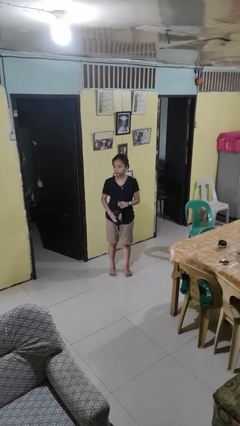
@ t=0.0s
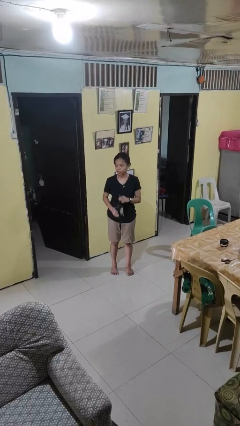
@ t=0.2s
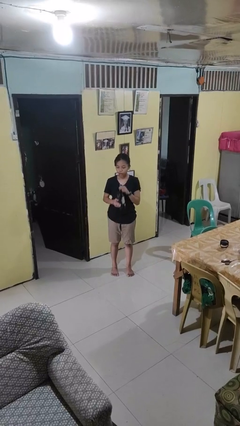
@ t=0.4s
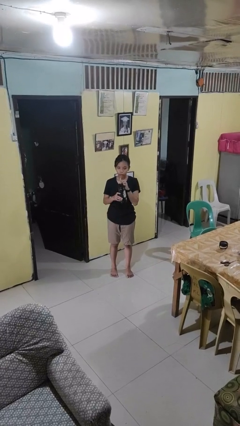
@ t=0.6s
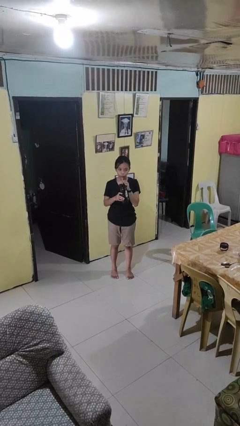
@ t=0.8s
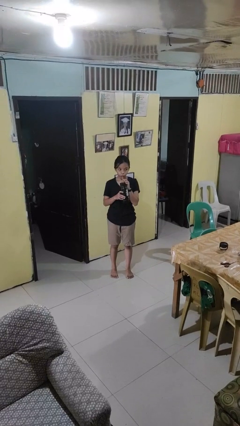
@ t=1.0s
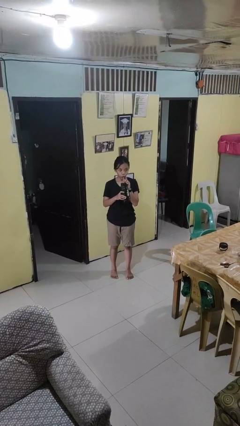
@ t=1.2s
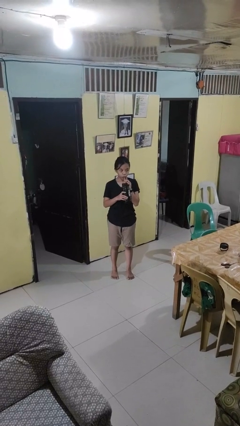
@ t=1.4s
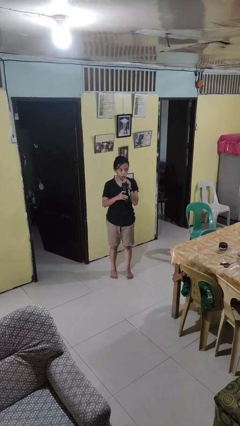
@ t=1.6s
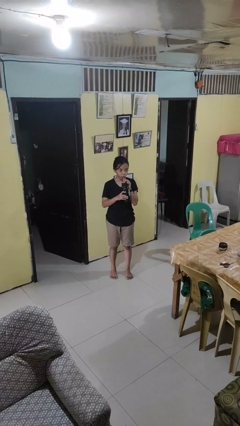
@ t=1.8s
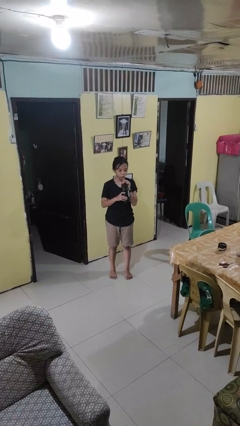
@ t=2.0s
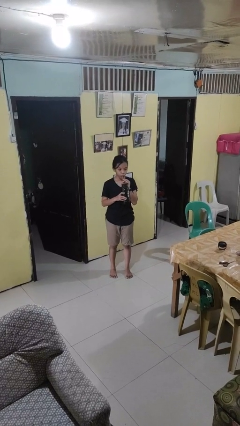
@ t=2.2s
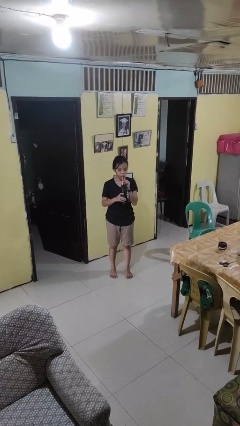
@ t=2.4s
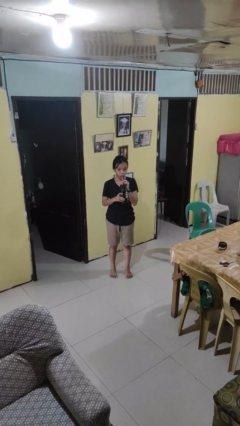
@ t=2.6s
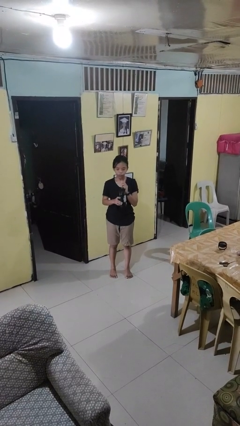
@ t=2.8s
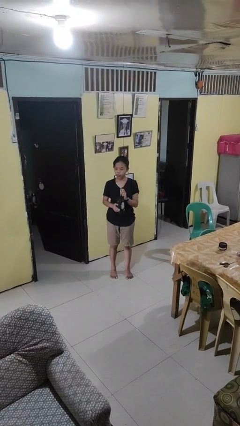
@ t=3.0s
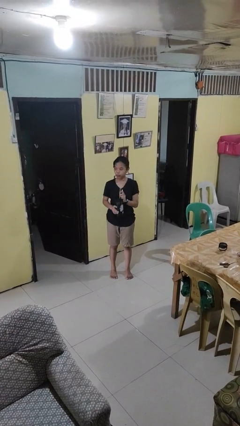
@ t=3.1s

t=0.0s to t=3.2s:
person drinks from straw

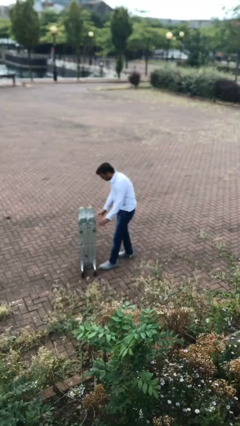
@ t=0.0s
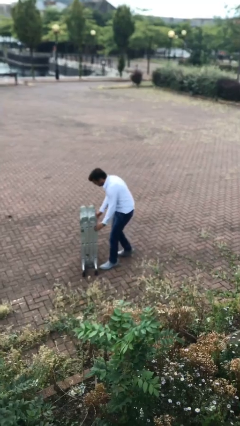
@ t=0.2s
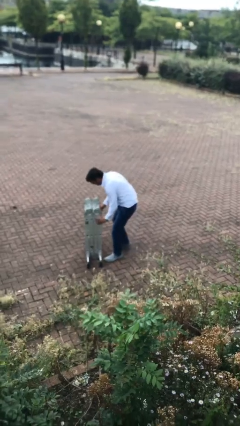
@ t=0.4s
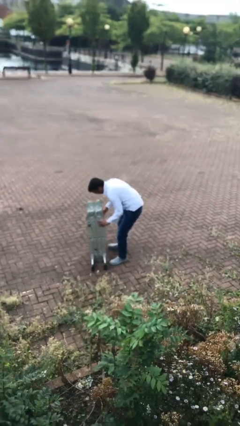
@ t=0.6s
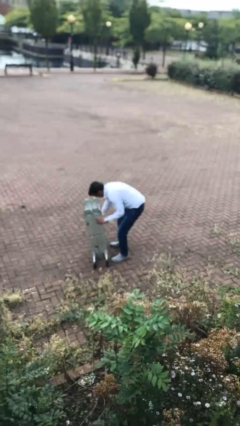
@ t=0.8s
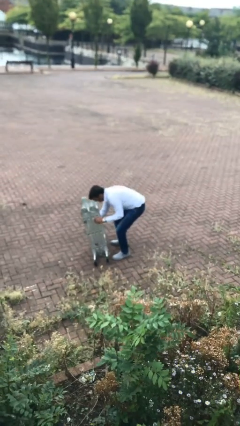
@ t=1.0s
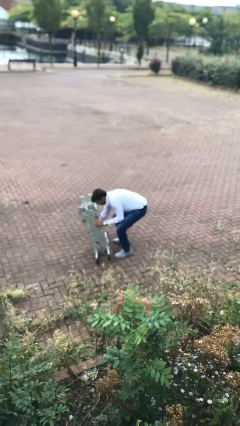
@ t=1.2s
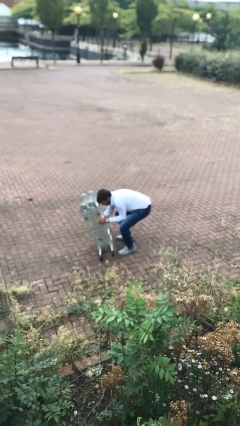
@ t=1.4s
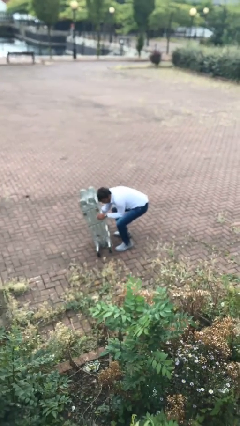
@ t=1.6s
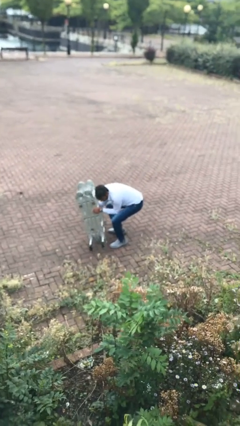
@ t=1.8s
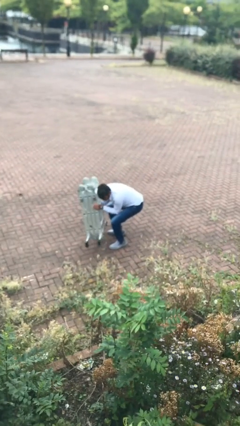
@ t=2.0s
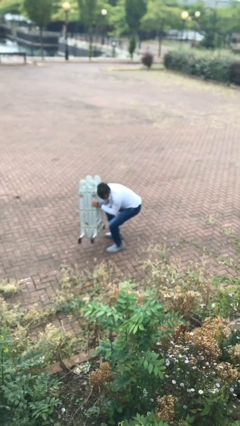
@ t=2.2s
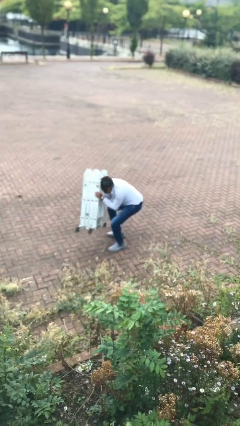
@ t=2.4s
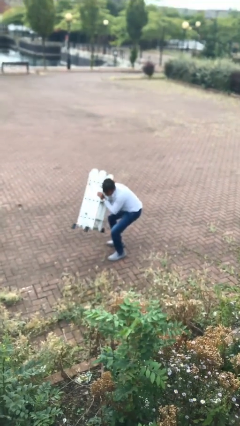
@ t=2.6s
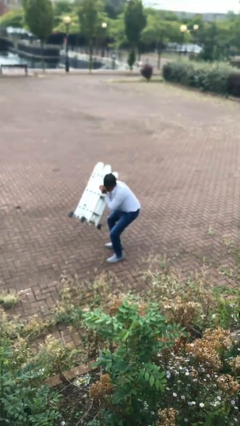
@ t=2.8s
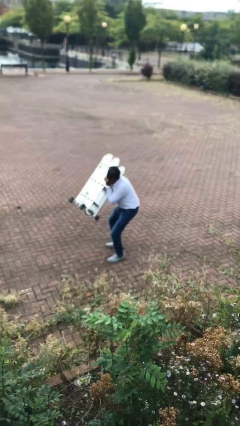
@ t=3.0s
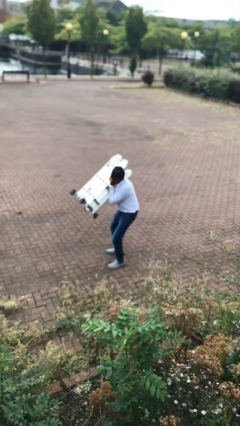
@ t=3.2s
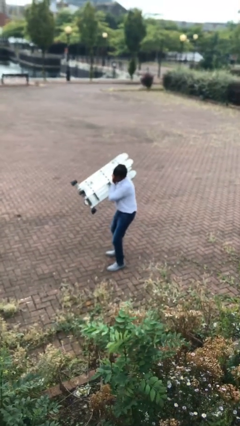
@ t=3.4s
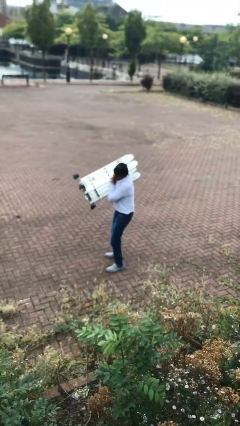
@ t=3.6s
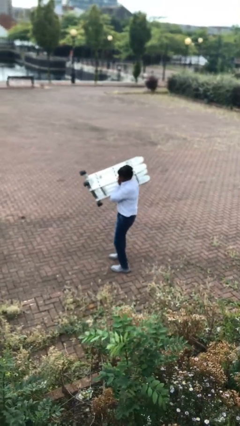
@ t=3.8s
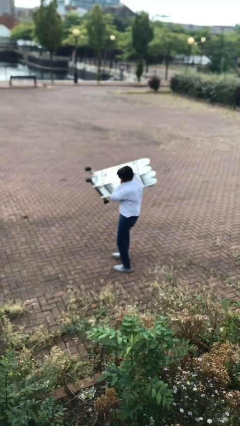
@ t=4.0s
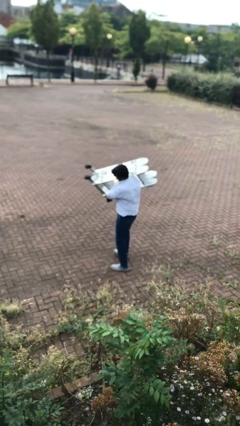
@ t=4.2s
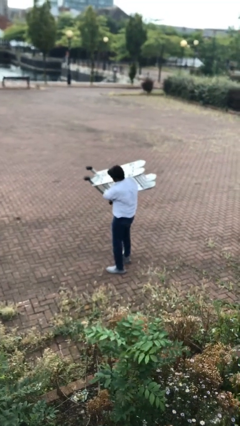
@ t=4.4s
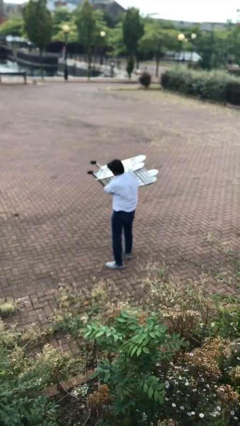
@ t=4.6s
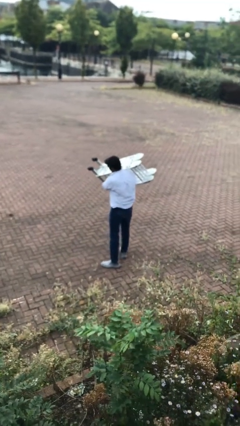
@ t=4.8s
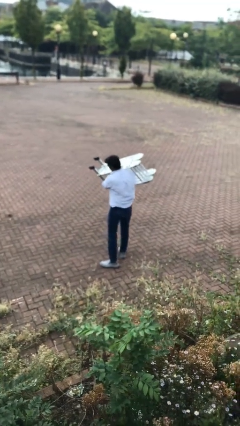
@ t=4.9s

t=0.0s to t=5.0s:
person picks up object from floor

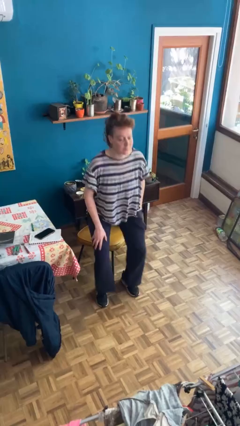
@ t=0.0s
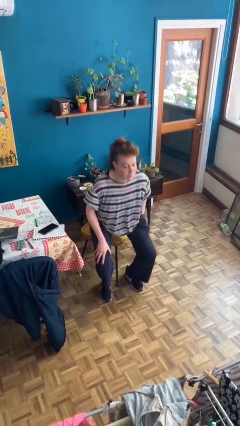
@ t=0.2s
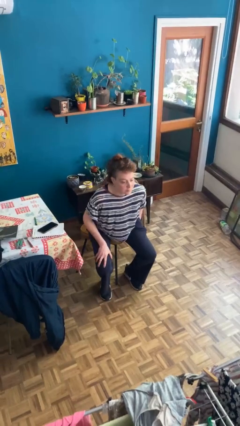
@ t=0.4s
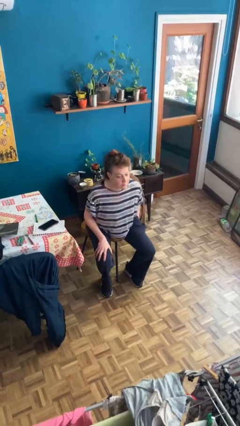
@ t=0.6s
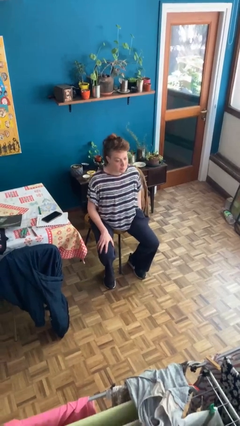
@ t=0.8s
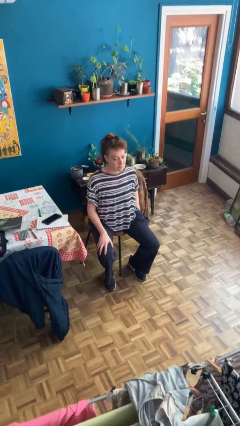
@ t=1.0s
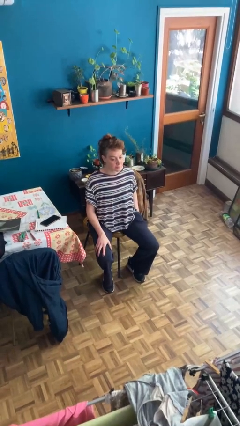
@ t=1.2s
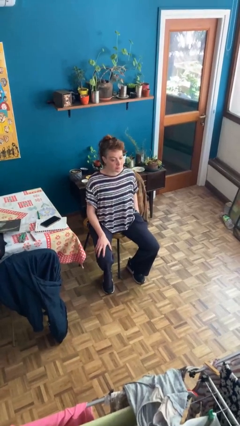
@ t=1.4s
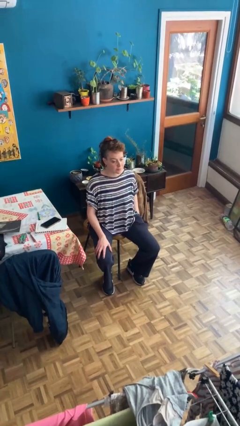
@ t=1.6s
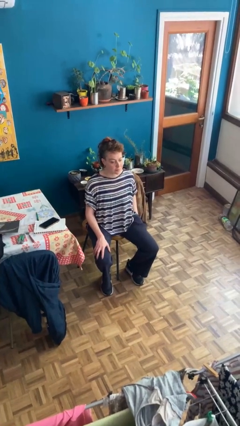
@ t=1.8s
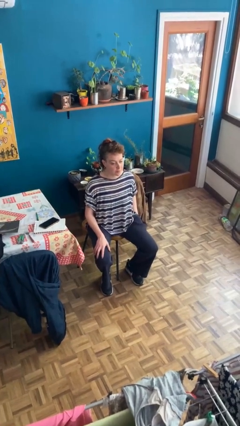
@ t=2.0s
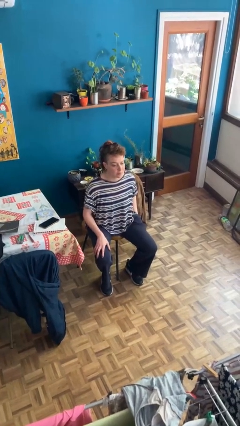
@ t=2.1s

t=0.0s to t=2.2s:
person sits down

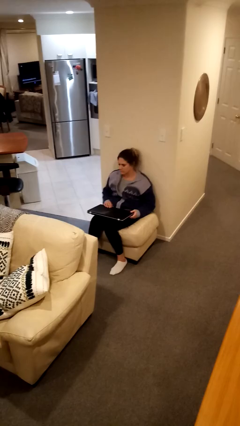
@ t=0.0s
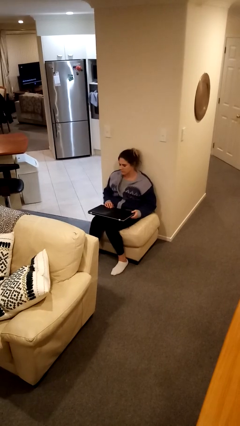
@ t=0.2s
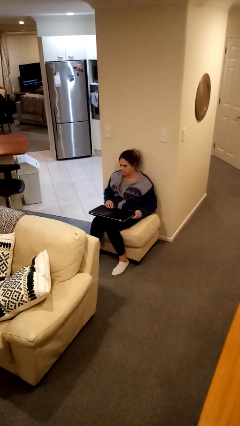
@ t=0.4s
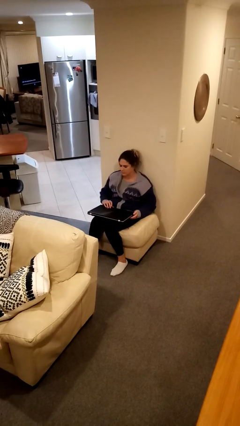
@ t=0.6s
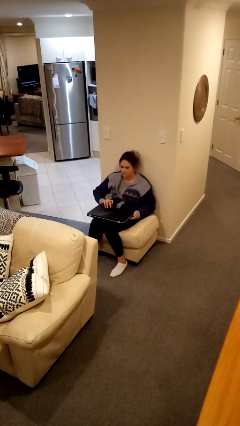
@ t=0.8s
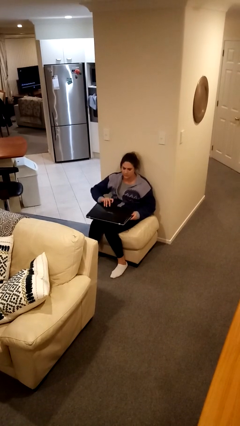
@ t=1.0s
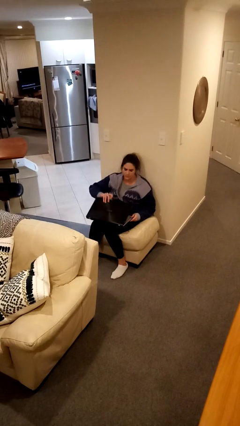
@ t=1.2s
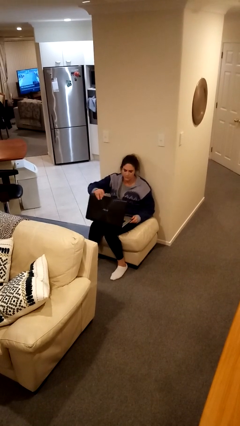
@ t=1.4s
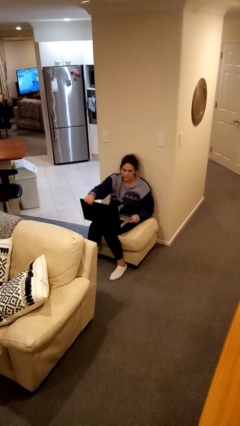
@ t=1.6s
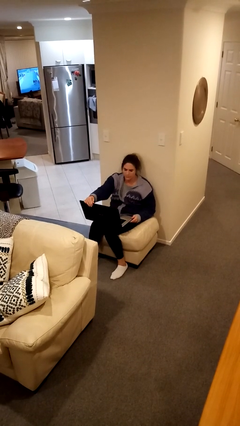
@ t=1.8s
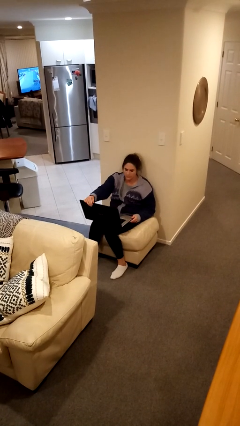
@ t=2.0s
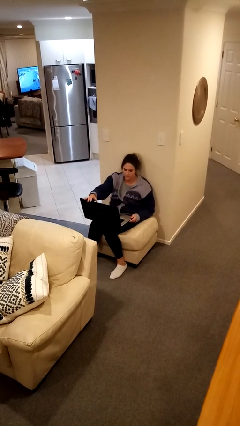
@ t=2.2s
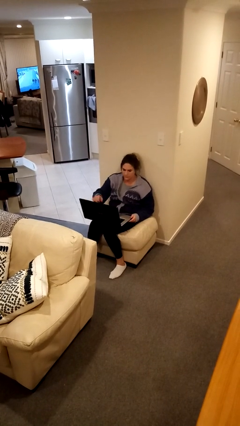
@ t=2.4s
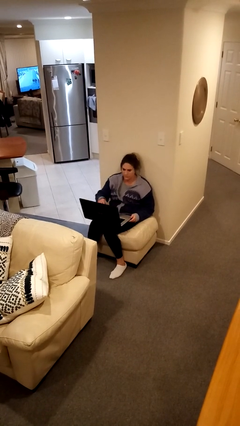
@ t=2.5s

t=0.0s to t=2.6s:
person opens laptop

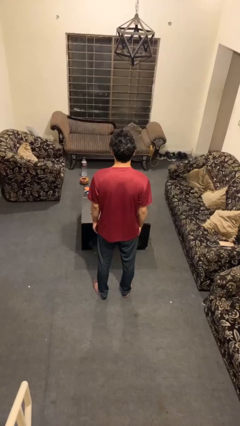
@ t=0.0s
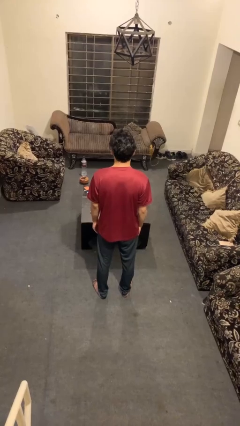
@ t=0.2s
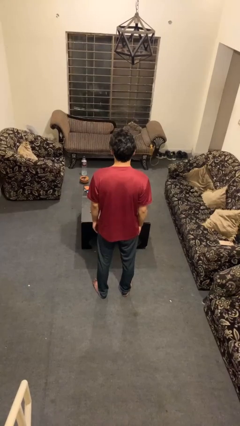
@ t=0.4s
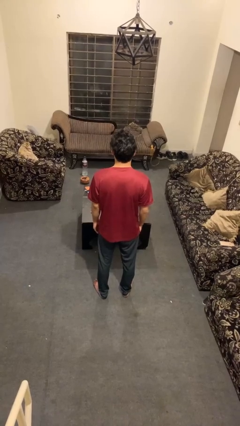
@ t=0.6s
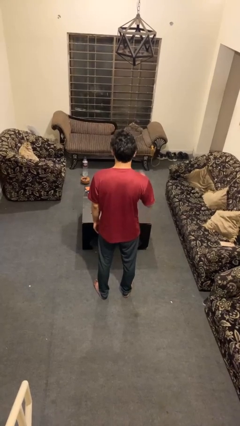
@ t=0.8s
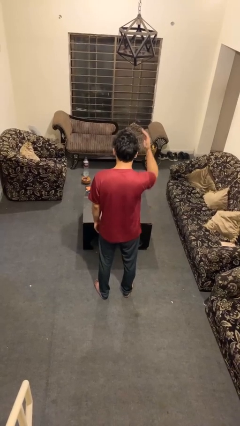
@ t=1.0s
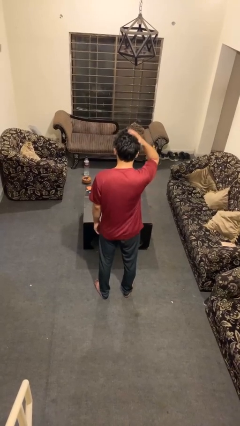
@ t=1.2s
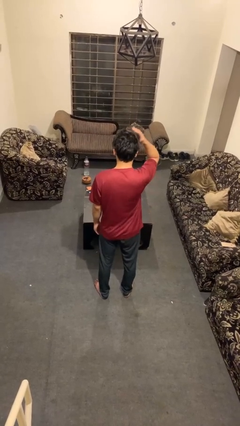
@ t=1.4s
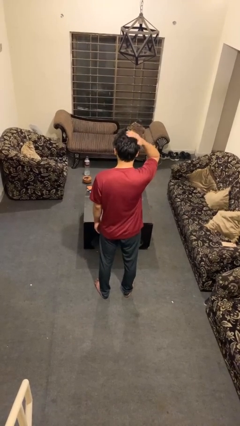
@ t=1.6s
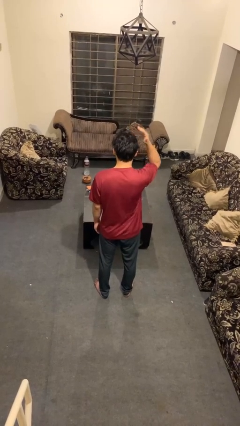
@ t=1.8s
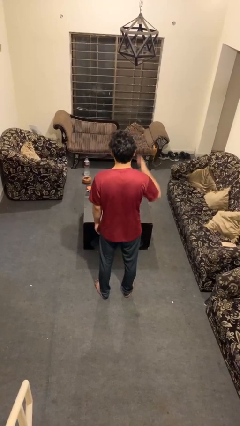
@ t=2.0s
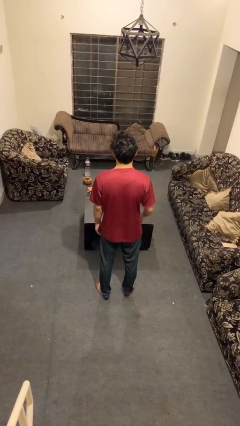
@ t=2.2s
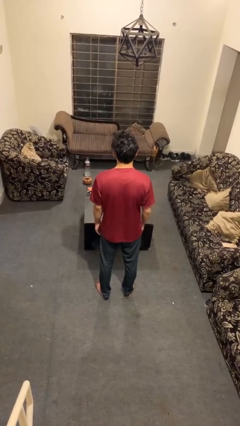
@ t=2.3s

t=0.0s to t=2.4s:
person pats head

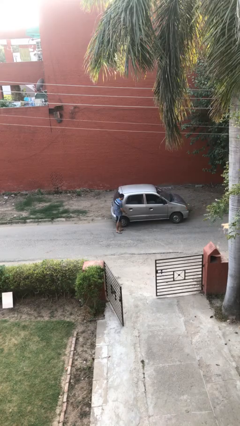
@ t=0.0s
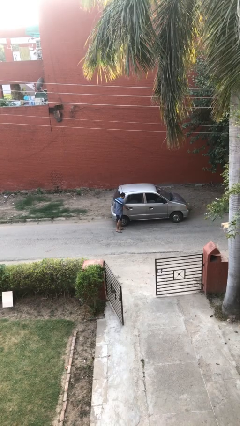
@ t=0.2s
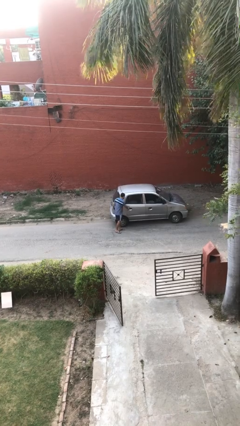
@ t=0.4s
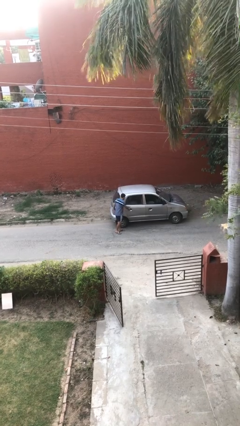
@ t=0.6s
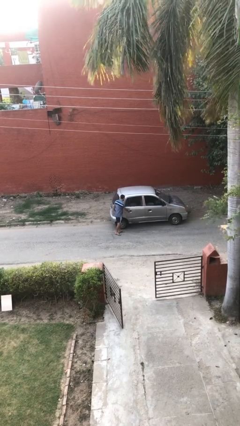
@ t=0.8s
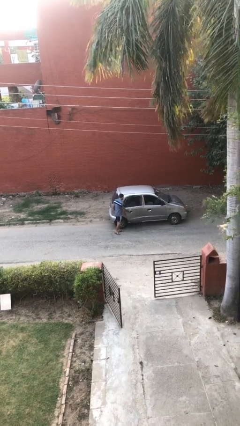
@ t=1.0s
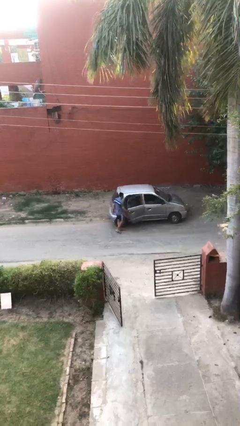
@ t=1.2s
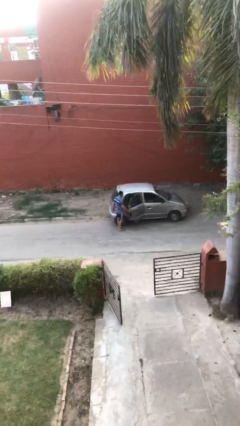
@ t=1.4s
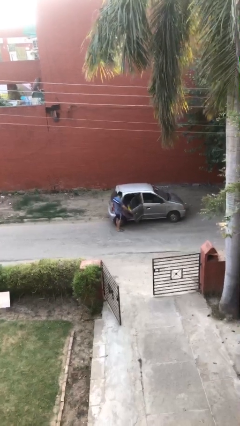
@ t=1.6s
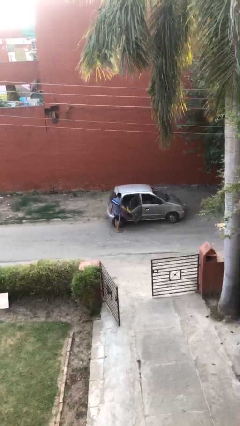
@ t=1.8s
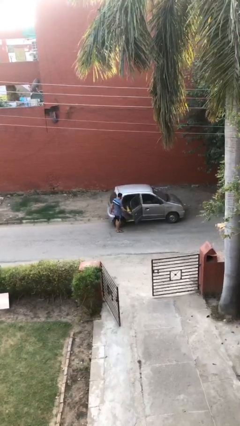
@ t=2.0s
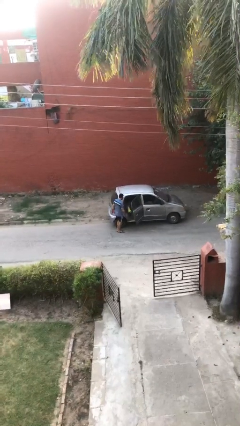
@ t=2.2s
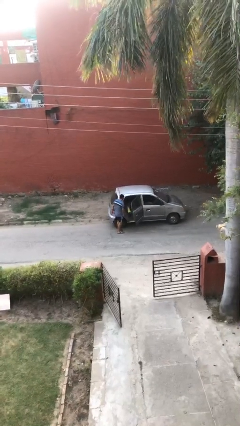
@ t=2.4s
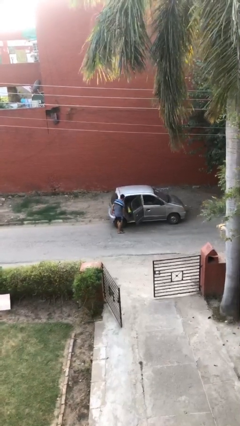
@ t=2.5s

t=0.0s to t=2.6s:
person opens car door
